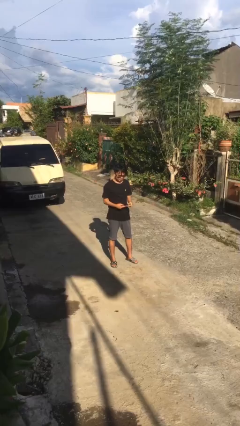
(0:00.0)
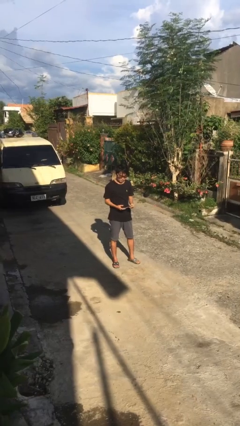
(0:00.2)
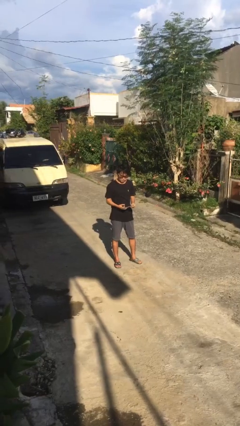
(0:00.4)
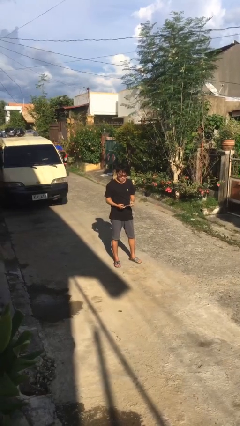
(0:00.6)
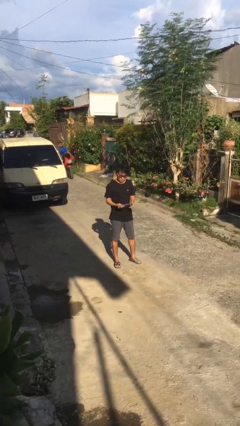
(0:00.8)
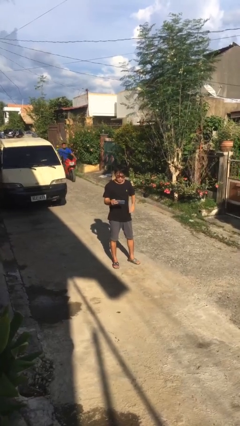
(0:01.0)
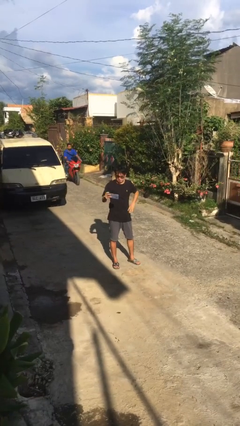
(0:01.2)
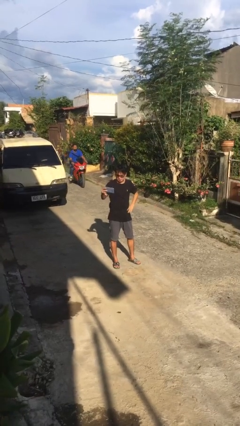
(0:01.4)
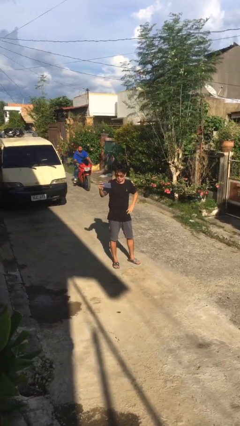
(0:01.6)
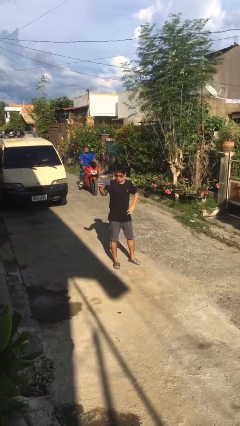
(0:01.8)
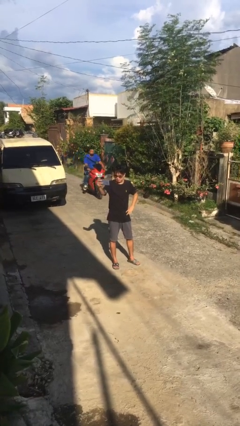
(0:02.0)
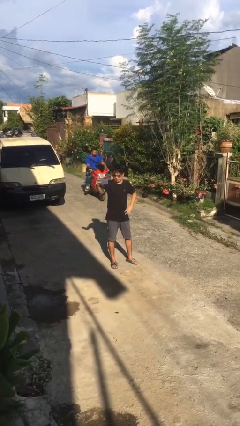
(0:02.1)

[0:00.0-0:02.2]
person takes selfie

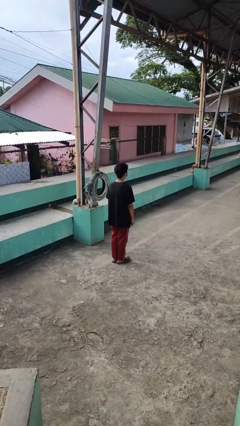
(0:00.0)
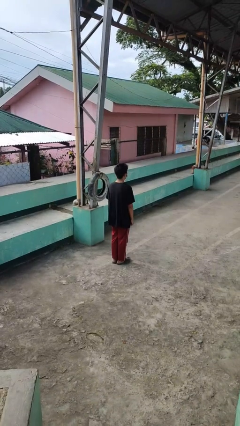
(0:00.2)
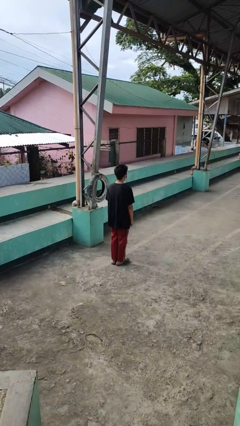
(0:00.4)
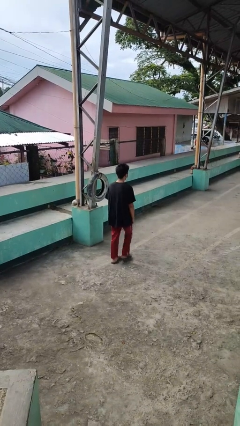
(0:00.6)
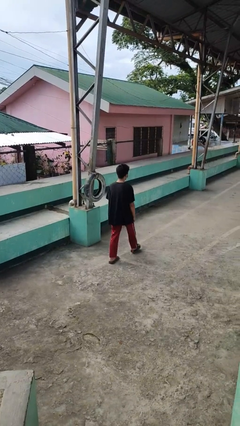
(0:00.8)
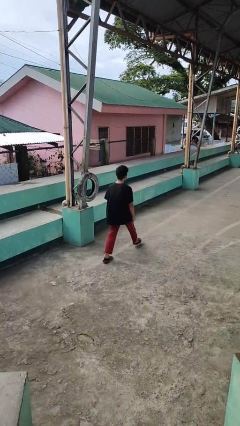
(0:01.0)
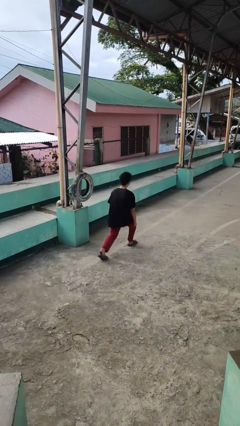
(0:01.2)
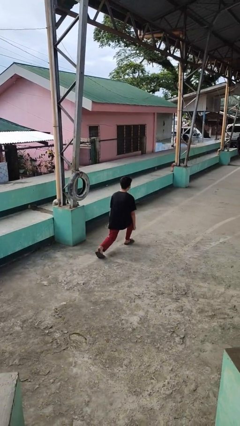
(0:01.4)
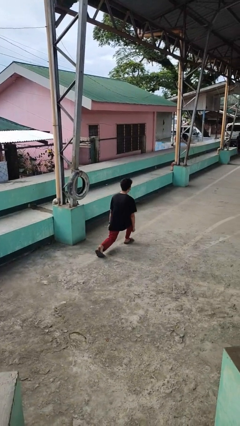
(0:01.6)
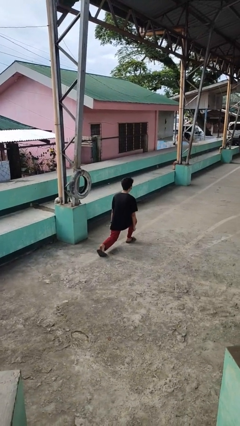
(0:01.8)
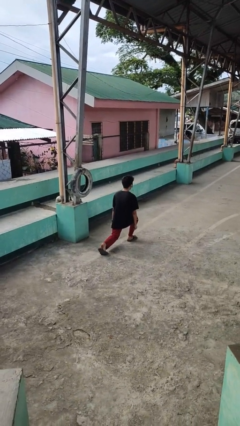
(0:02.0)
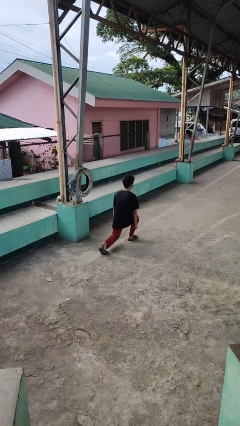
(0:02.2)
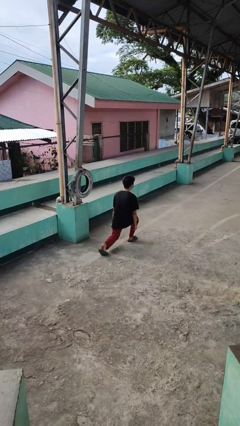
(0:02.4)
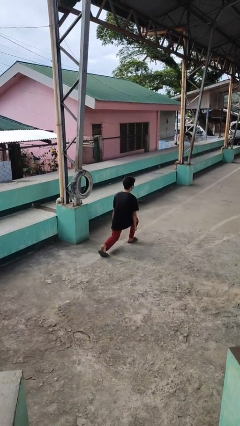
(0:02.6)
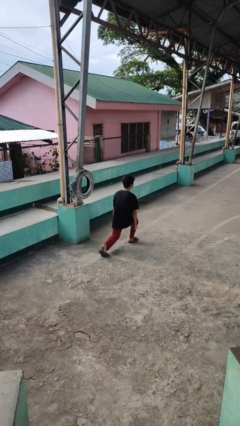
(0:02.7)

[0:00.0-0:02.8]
person exercises with lunges

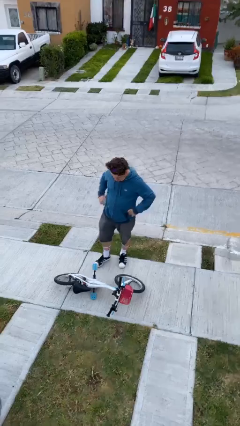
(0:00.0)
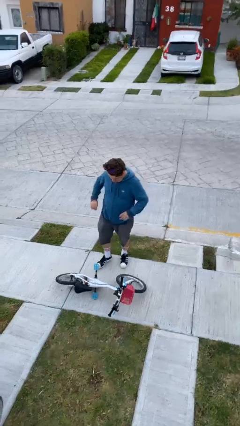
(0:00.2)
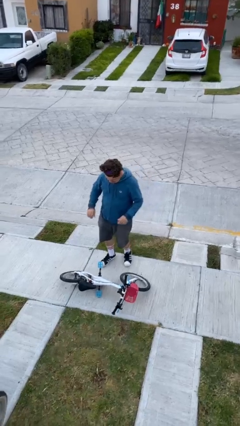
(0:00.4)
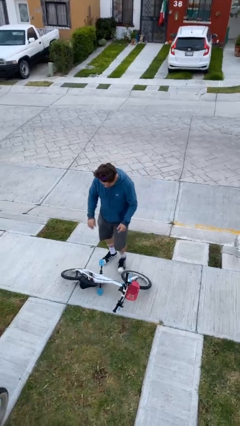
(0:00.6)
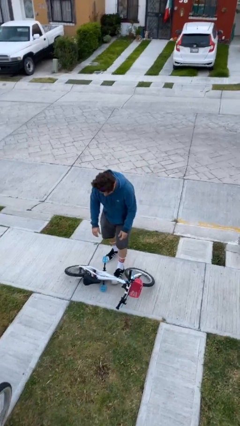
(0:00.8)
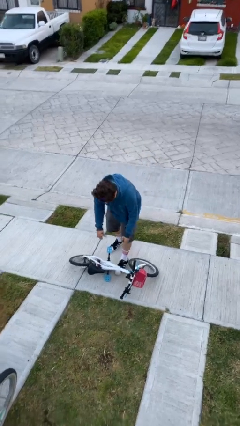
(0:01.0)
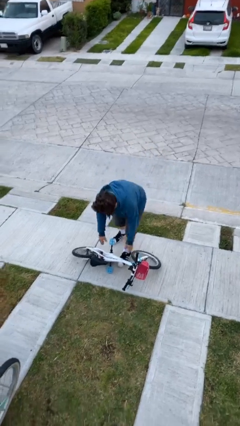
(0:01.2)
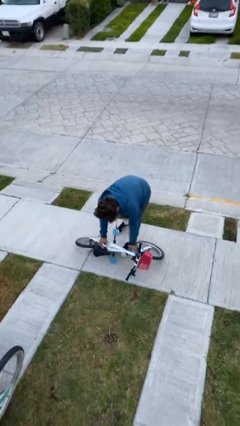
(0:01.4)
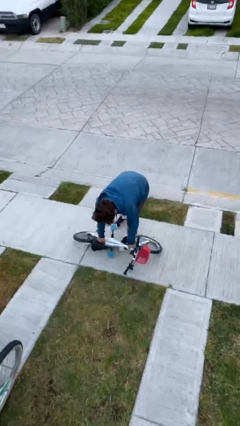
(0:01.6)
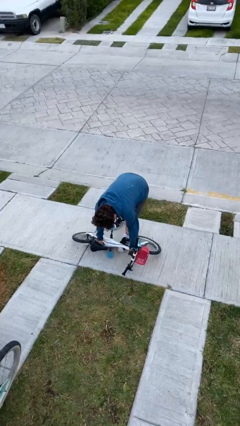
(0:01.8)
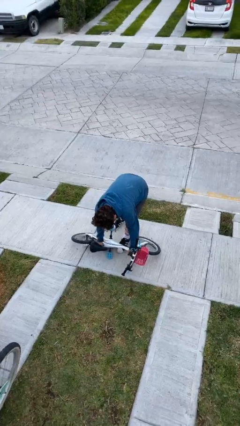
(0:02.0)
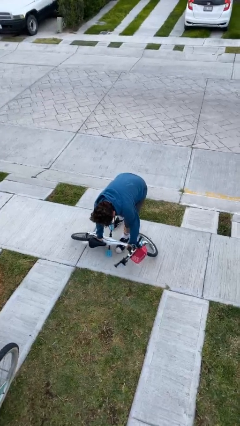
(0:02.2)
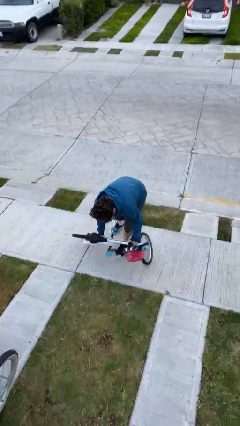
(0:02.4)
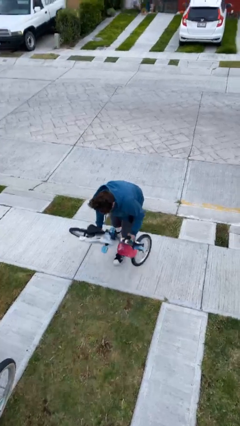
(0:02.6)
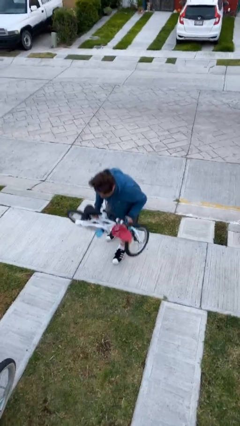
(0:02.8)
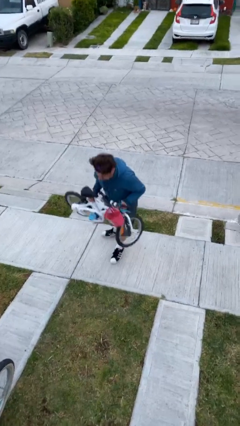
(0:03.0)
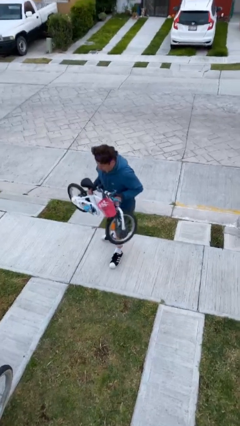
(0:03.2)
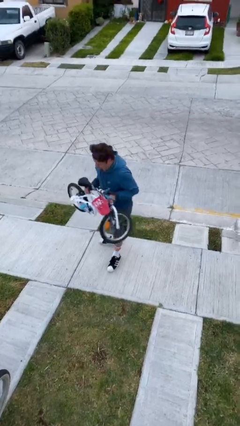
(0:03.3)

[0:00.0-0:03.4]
person picks up object from floor

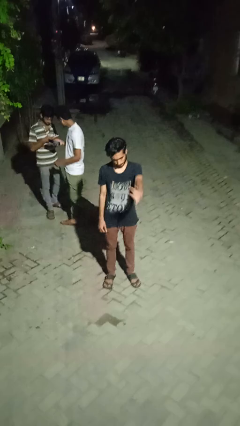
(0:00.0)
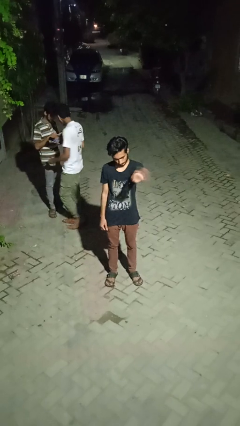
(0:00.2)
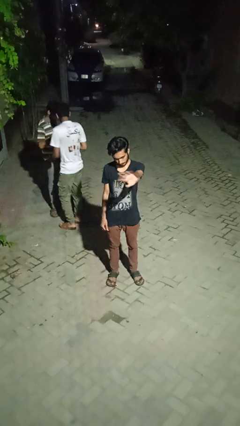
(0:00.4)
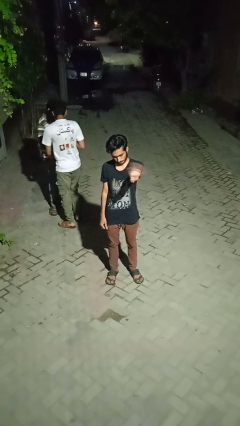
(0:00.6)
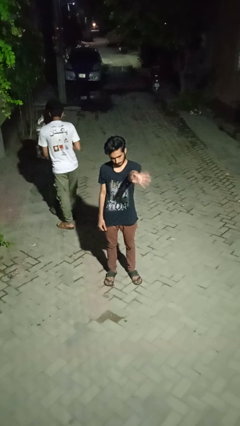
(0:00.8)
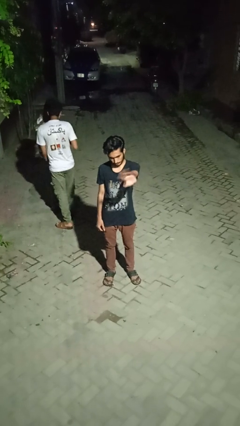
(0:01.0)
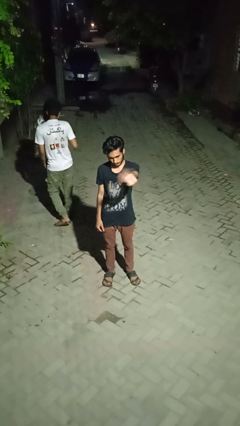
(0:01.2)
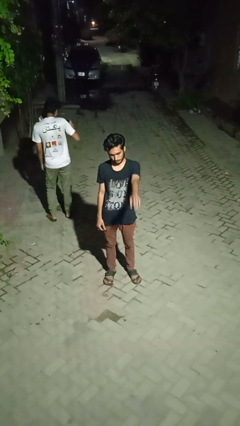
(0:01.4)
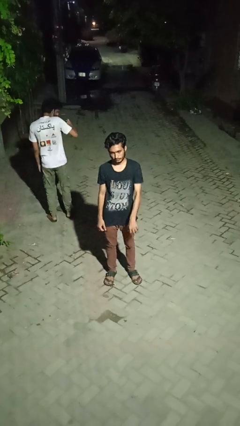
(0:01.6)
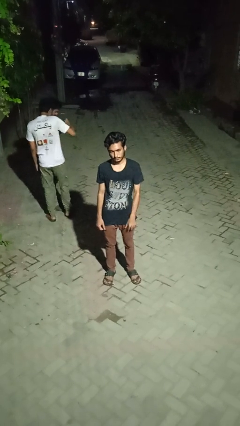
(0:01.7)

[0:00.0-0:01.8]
person waves at person

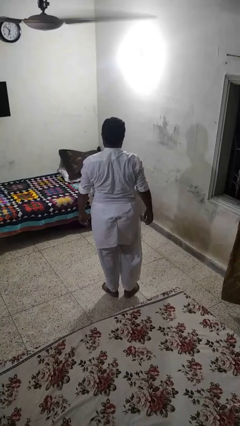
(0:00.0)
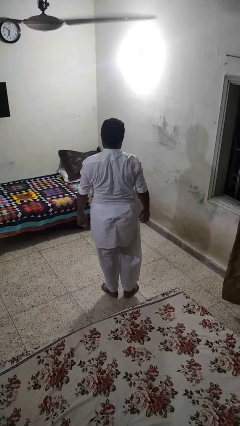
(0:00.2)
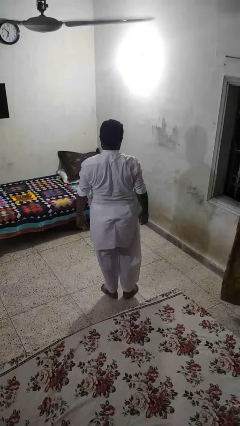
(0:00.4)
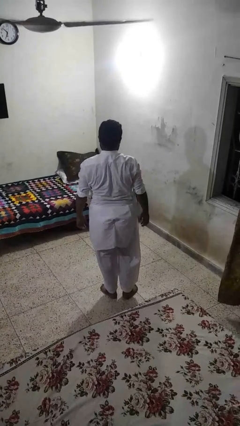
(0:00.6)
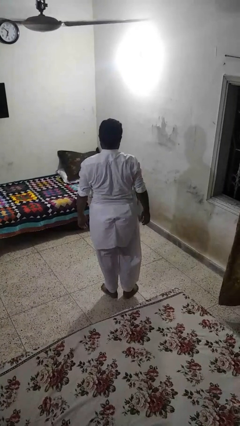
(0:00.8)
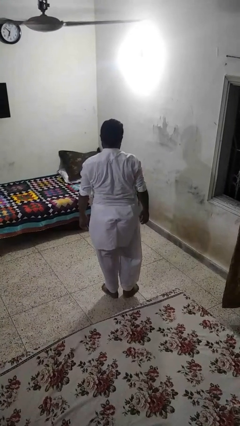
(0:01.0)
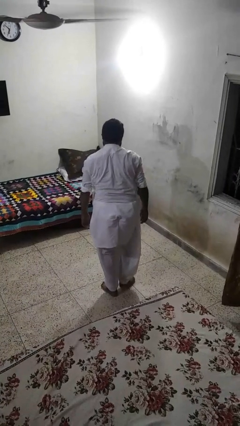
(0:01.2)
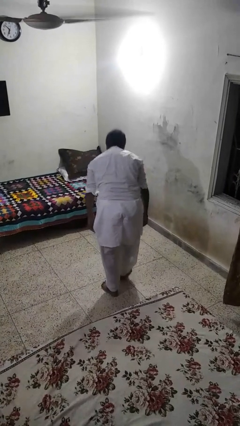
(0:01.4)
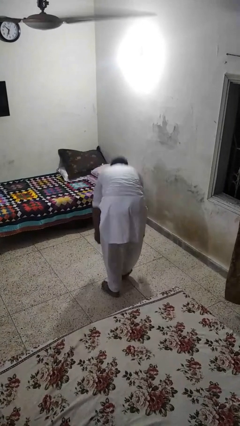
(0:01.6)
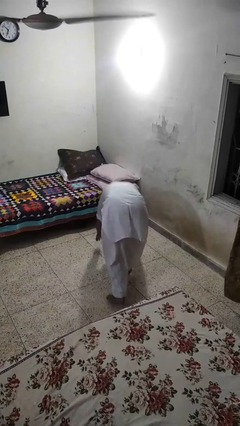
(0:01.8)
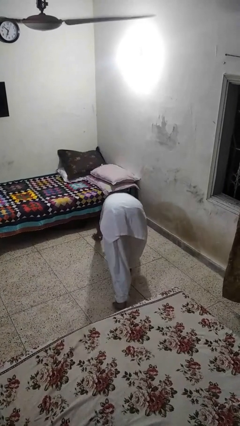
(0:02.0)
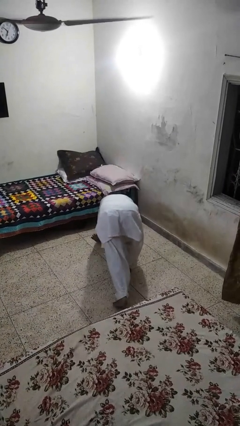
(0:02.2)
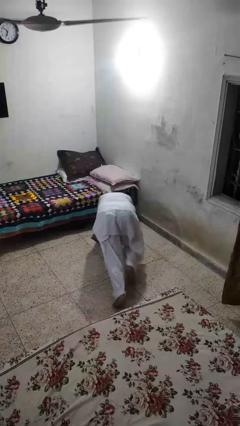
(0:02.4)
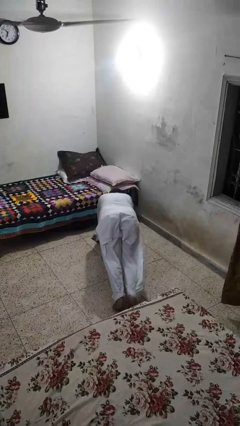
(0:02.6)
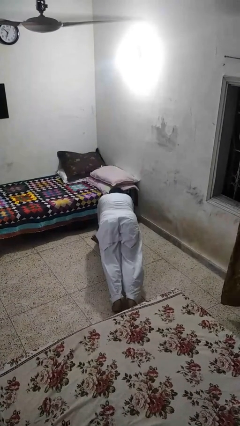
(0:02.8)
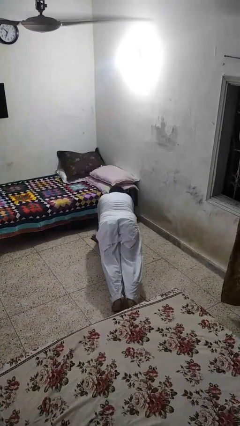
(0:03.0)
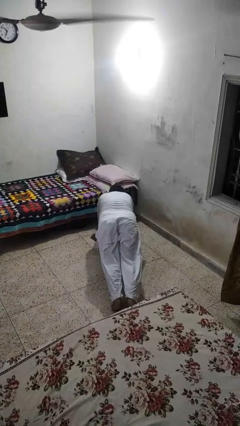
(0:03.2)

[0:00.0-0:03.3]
person exercises with plank

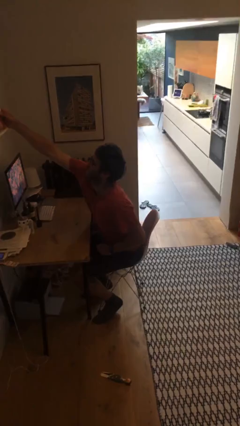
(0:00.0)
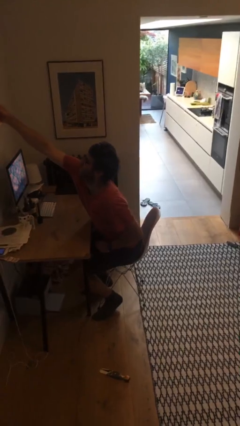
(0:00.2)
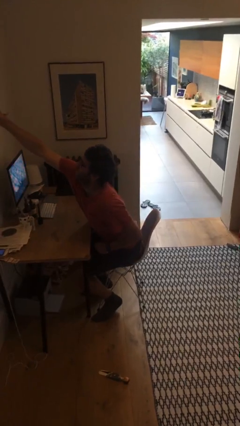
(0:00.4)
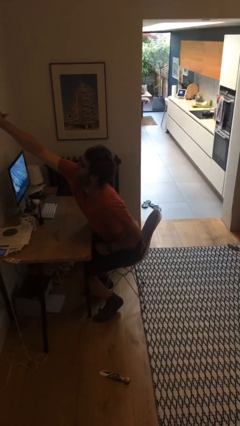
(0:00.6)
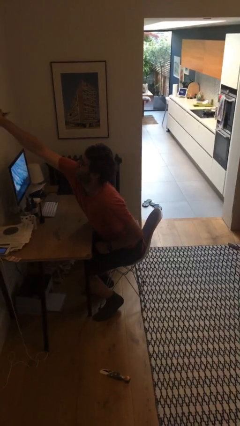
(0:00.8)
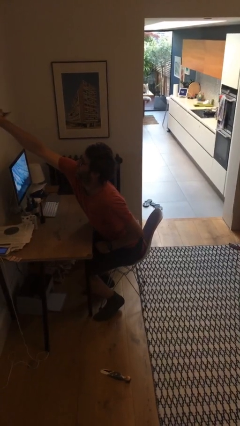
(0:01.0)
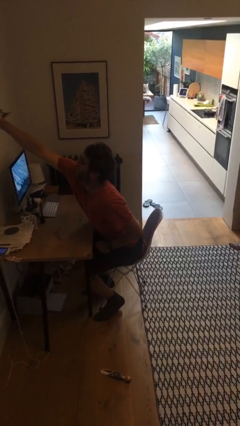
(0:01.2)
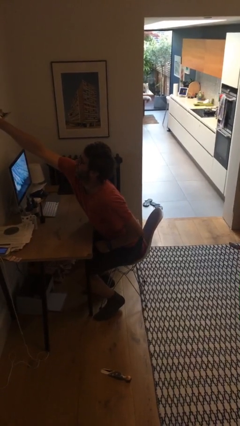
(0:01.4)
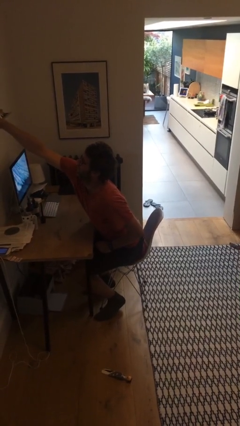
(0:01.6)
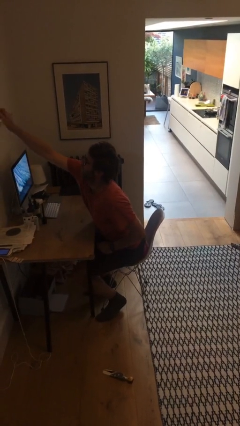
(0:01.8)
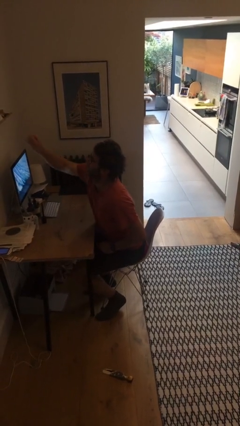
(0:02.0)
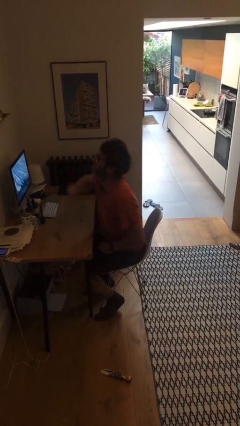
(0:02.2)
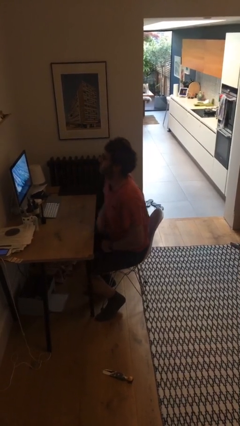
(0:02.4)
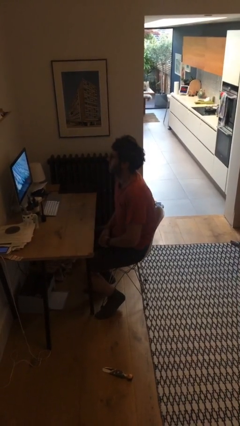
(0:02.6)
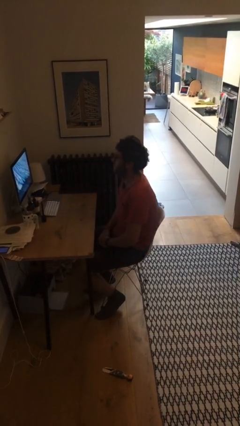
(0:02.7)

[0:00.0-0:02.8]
person puts down object on shelf

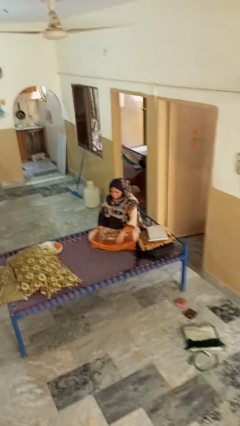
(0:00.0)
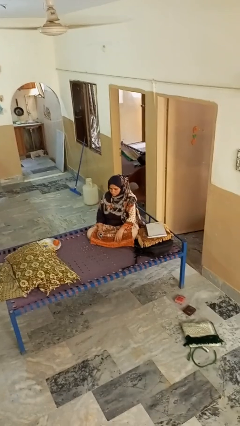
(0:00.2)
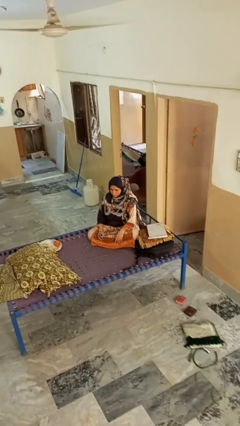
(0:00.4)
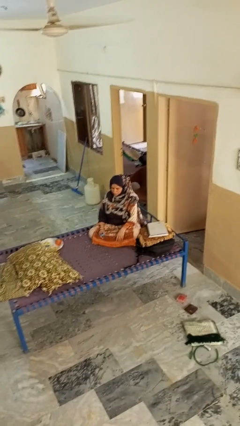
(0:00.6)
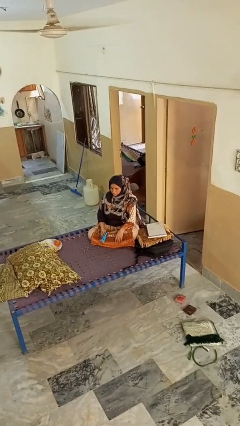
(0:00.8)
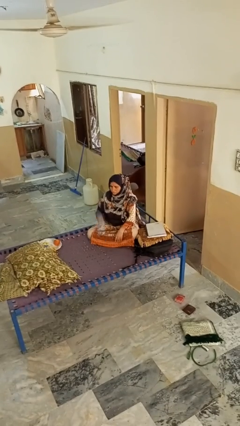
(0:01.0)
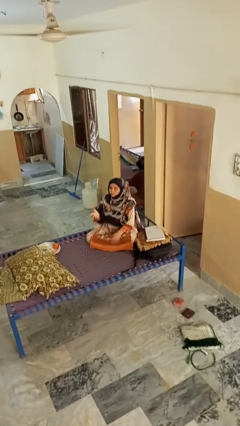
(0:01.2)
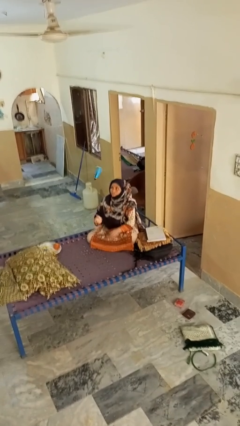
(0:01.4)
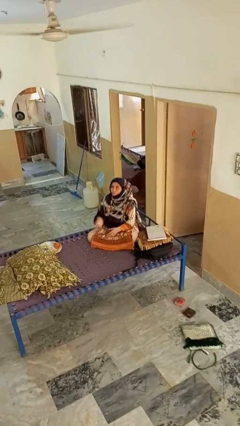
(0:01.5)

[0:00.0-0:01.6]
person drops object
